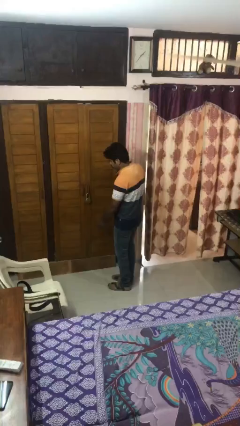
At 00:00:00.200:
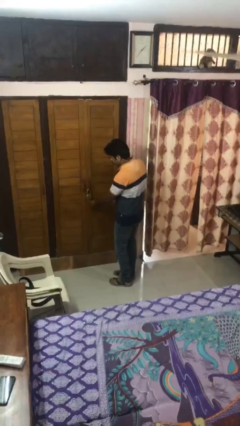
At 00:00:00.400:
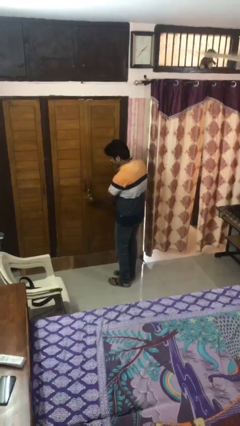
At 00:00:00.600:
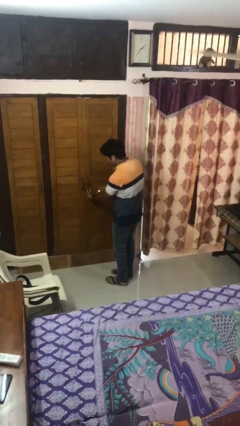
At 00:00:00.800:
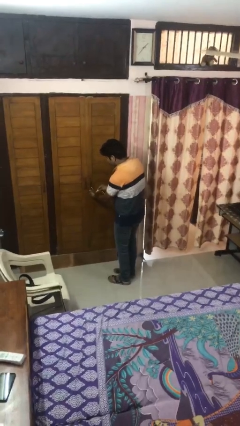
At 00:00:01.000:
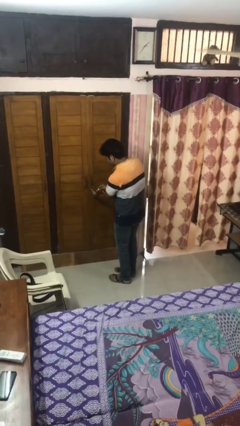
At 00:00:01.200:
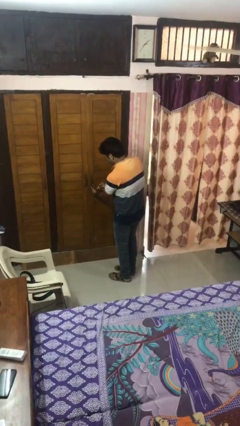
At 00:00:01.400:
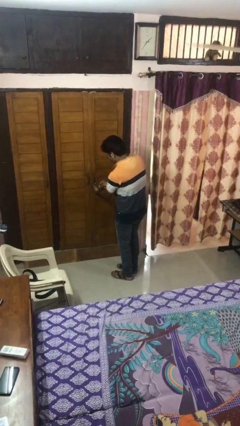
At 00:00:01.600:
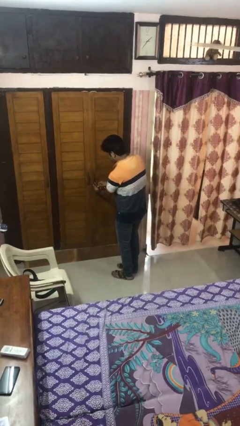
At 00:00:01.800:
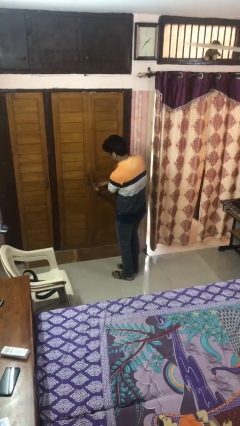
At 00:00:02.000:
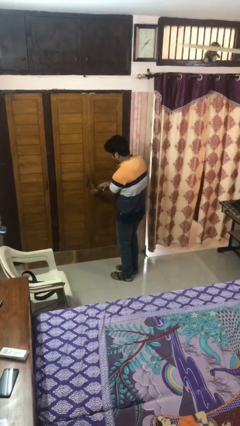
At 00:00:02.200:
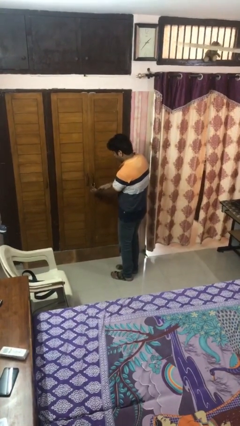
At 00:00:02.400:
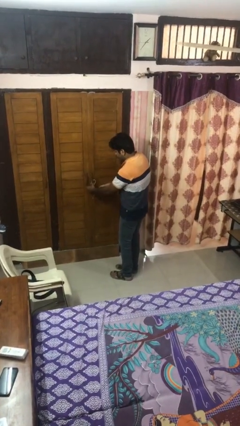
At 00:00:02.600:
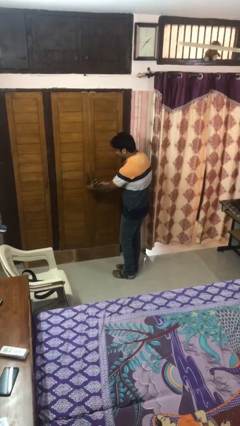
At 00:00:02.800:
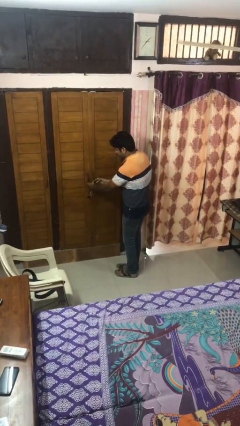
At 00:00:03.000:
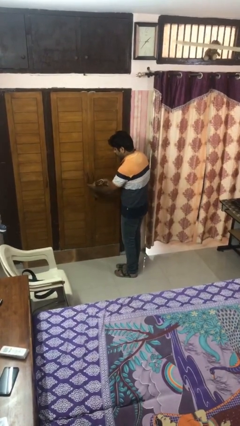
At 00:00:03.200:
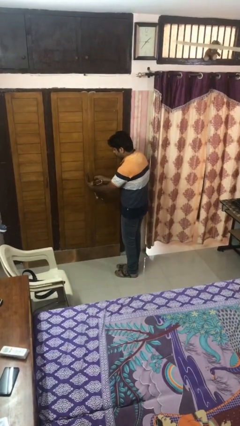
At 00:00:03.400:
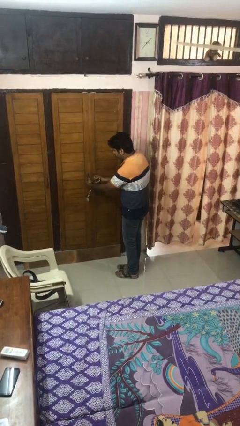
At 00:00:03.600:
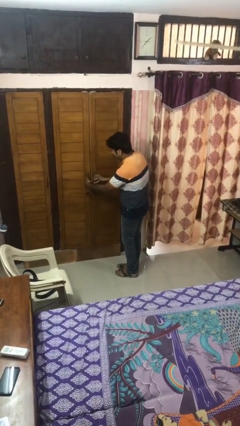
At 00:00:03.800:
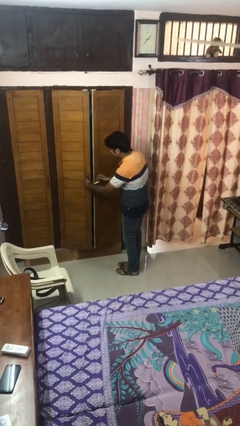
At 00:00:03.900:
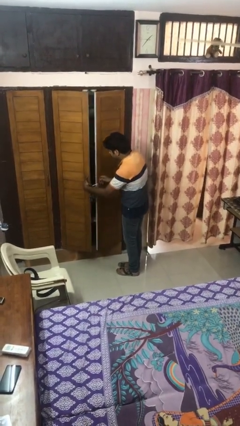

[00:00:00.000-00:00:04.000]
person unlocks door with keys

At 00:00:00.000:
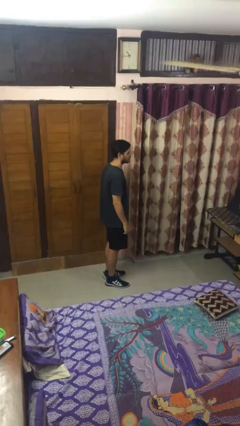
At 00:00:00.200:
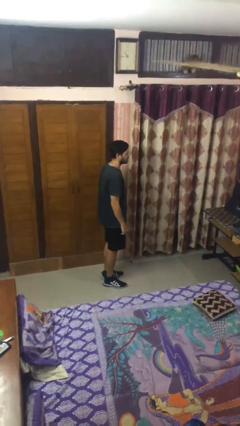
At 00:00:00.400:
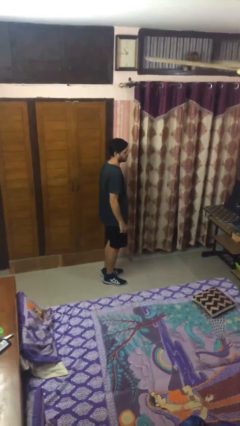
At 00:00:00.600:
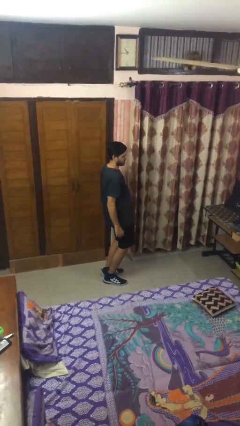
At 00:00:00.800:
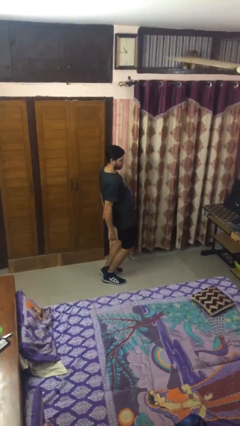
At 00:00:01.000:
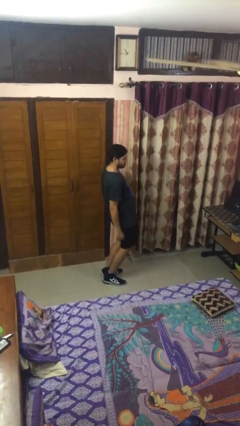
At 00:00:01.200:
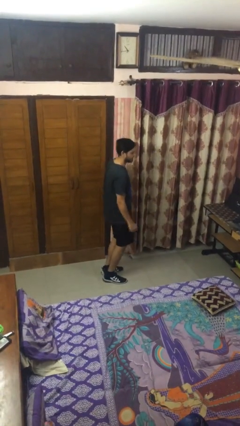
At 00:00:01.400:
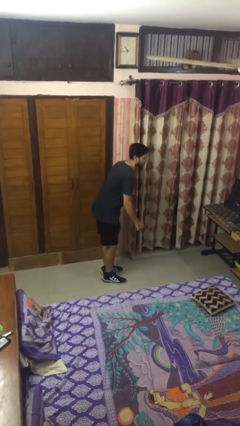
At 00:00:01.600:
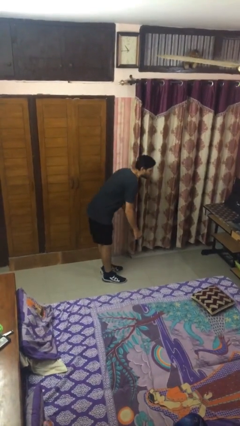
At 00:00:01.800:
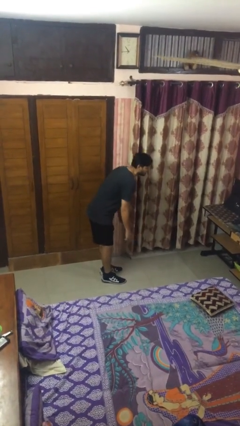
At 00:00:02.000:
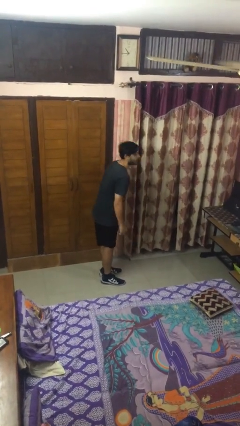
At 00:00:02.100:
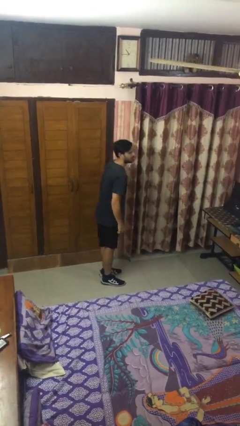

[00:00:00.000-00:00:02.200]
person wiggles hips

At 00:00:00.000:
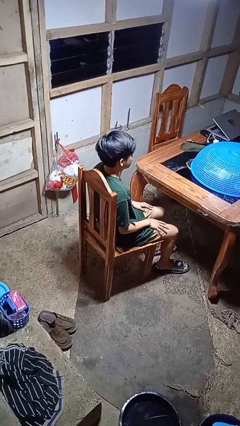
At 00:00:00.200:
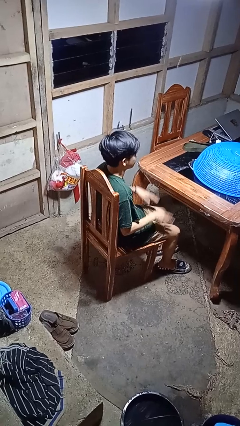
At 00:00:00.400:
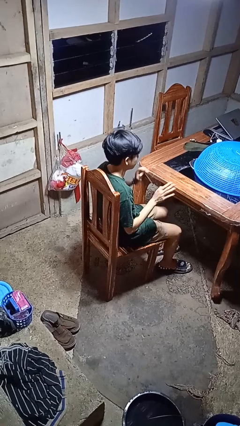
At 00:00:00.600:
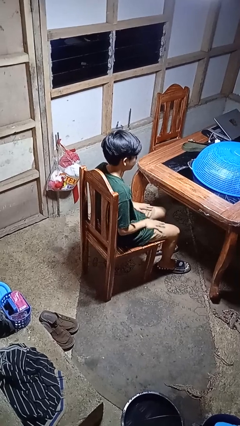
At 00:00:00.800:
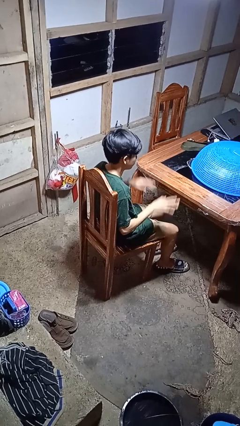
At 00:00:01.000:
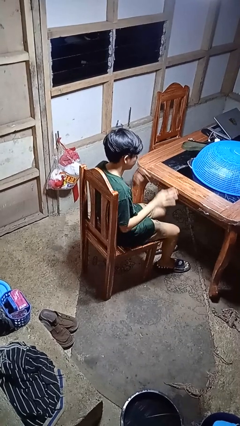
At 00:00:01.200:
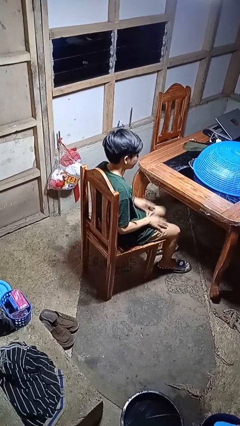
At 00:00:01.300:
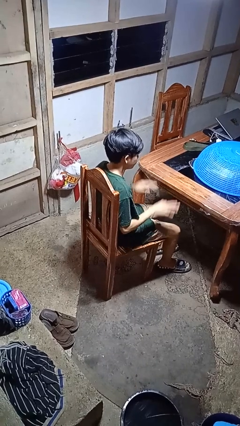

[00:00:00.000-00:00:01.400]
person slaps hands on thighs

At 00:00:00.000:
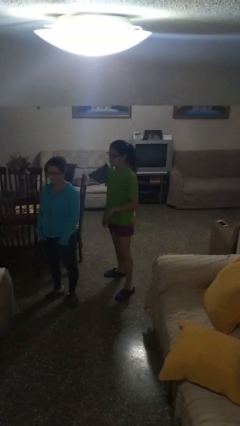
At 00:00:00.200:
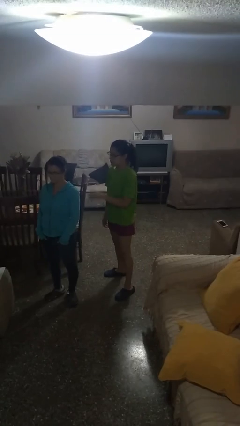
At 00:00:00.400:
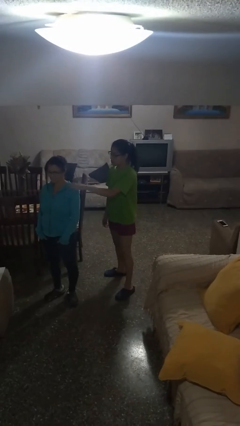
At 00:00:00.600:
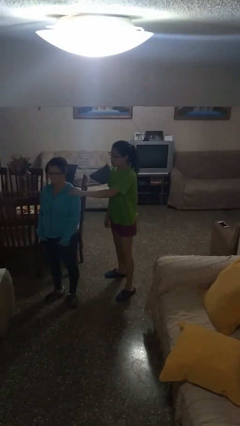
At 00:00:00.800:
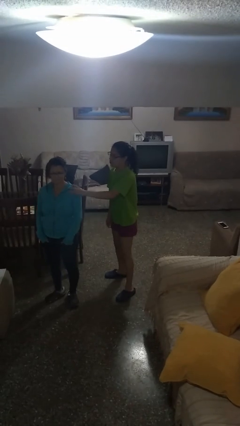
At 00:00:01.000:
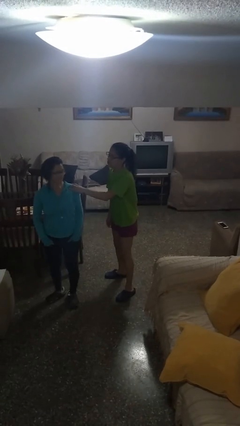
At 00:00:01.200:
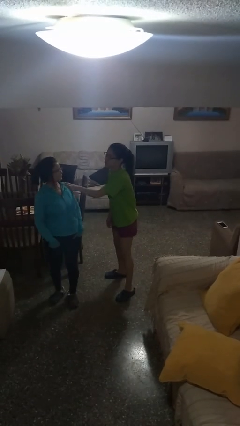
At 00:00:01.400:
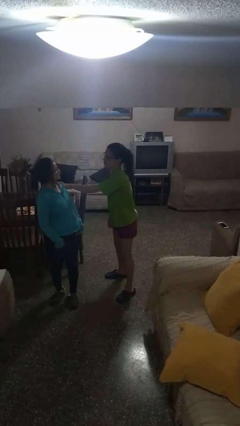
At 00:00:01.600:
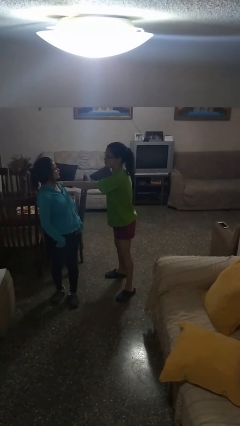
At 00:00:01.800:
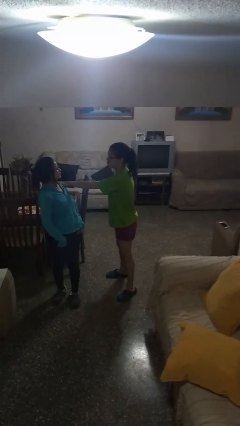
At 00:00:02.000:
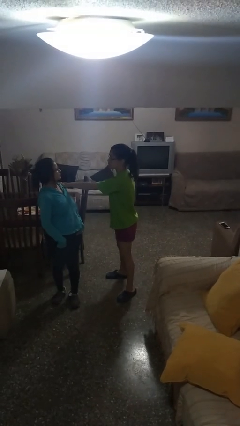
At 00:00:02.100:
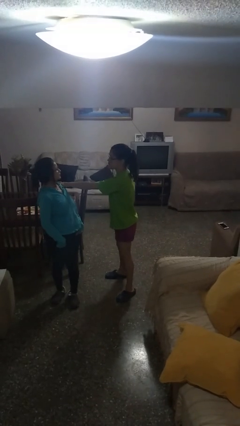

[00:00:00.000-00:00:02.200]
person grabs person by shoulder

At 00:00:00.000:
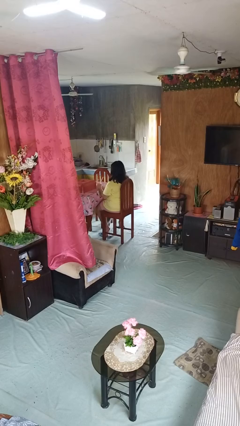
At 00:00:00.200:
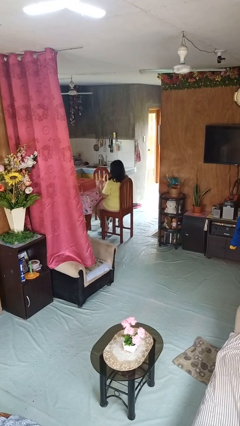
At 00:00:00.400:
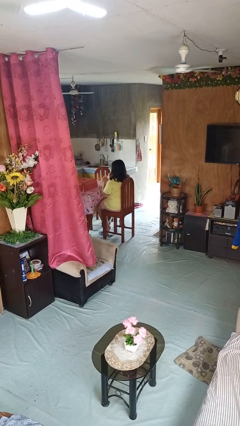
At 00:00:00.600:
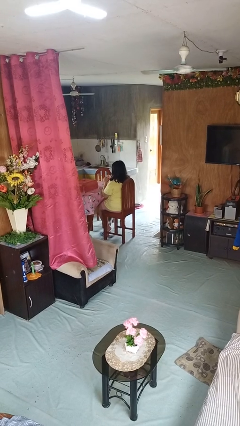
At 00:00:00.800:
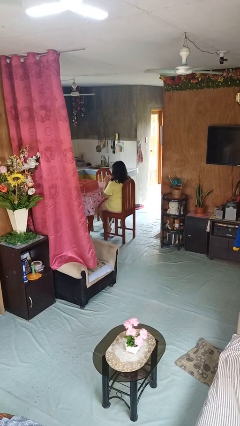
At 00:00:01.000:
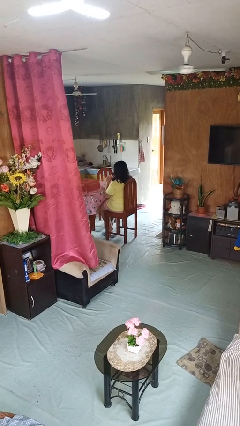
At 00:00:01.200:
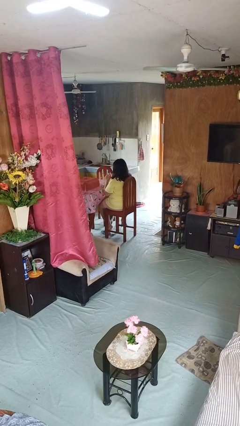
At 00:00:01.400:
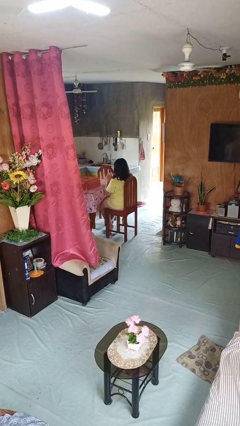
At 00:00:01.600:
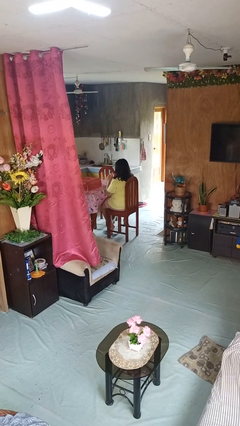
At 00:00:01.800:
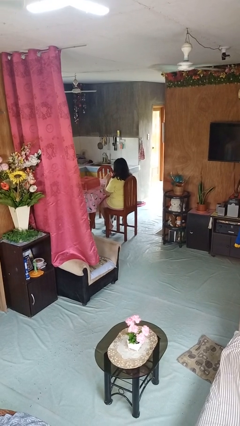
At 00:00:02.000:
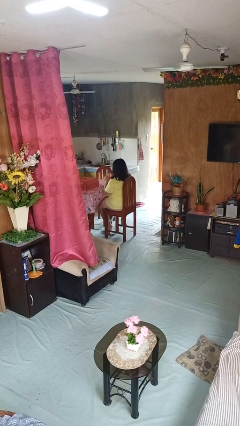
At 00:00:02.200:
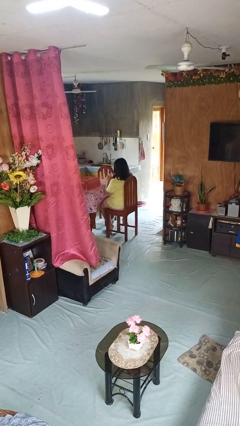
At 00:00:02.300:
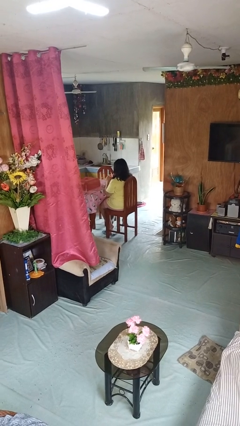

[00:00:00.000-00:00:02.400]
person drinks from straw

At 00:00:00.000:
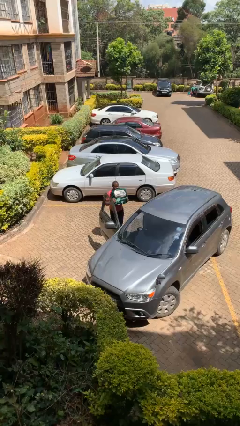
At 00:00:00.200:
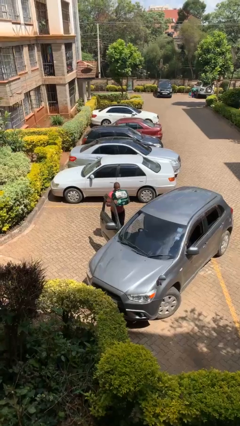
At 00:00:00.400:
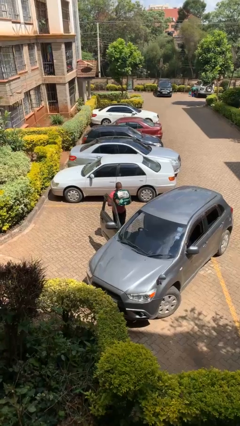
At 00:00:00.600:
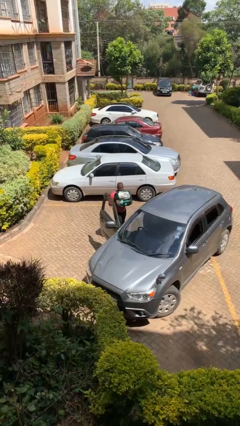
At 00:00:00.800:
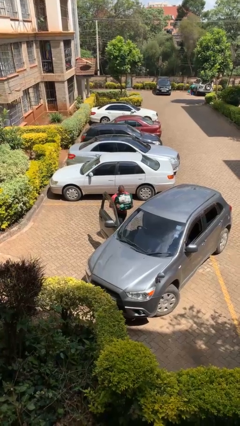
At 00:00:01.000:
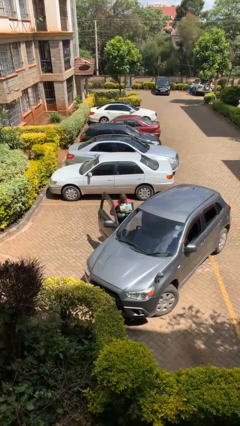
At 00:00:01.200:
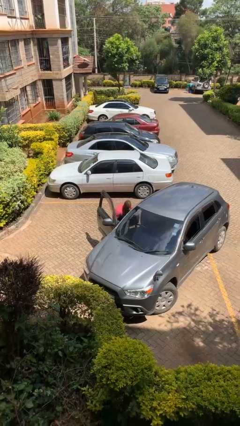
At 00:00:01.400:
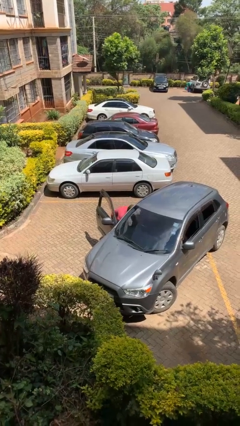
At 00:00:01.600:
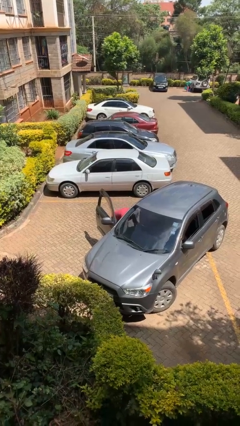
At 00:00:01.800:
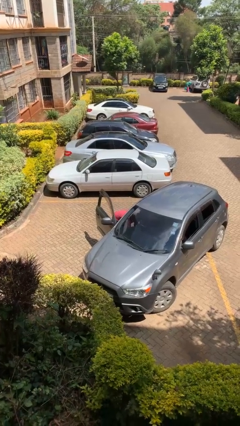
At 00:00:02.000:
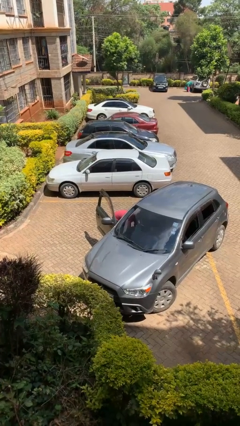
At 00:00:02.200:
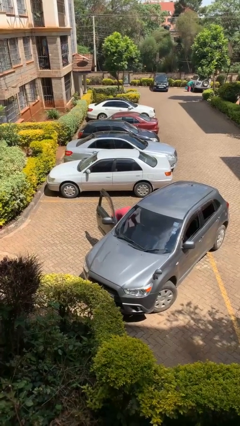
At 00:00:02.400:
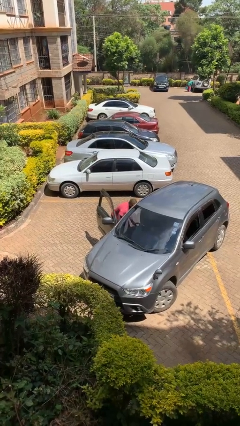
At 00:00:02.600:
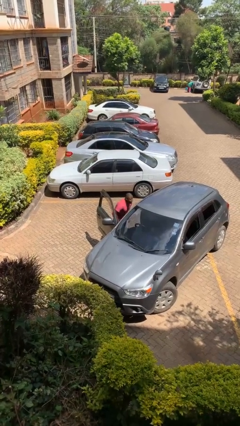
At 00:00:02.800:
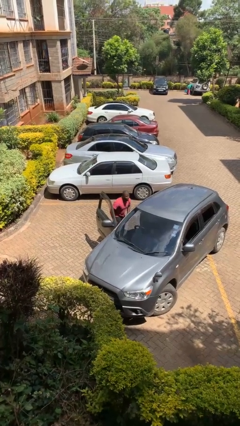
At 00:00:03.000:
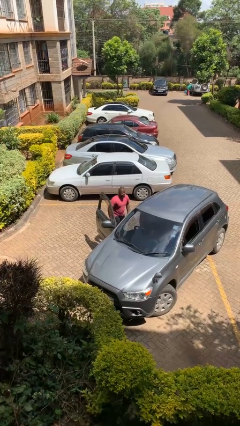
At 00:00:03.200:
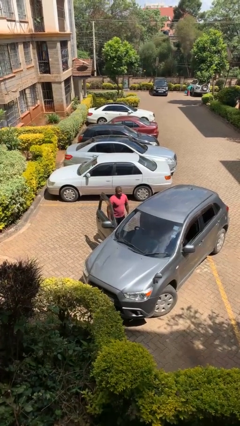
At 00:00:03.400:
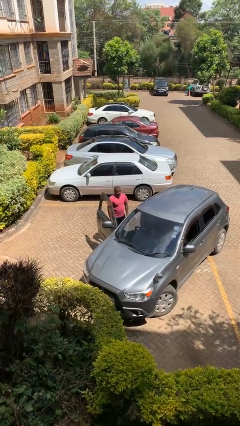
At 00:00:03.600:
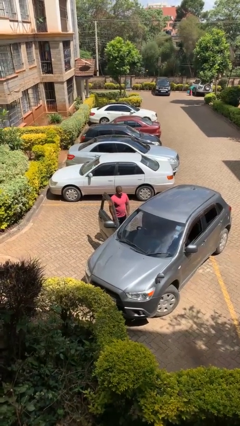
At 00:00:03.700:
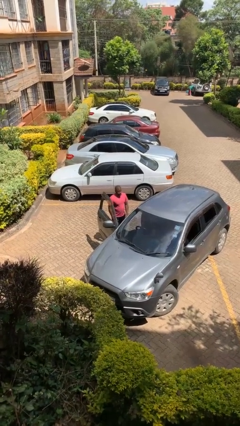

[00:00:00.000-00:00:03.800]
person loads car

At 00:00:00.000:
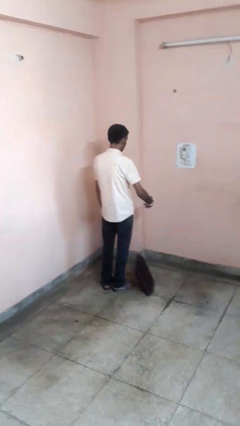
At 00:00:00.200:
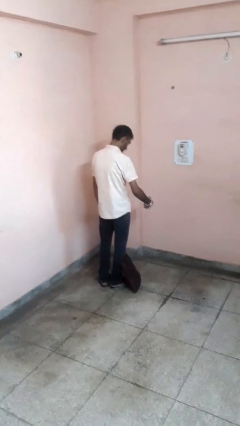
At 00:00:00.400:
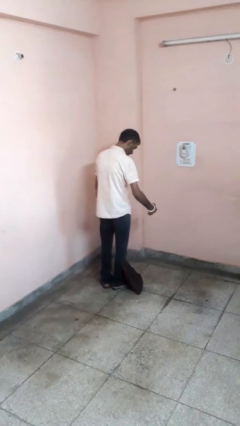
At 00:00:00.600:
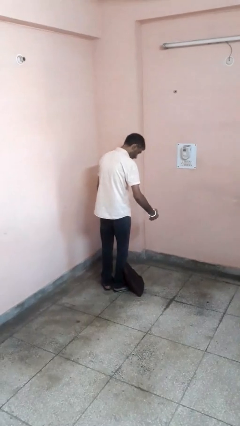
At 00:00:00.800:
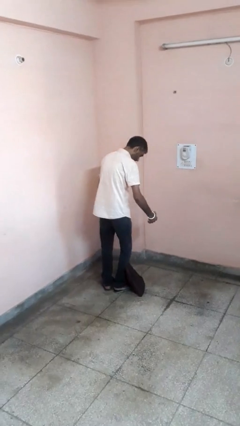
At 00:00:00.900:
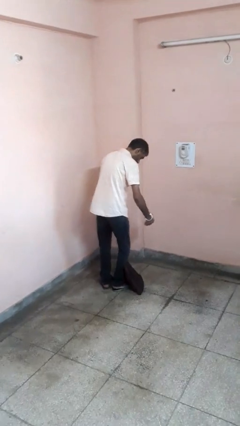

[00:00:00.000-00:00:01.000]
person throws object to ground
